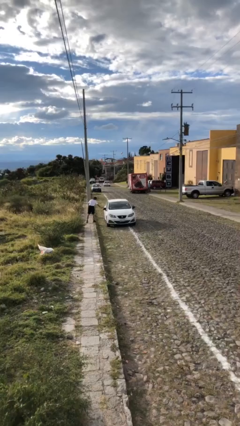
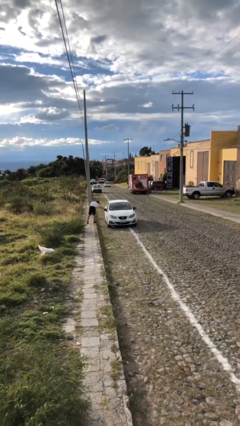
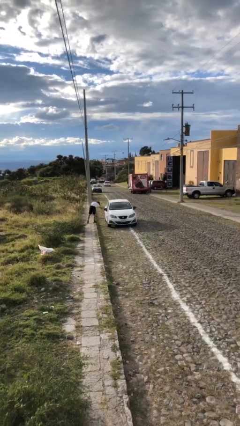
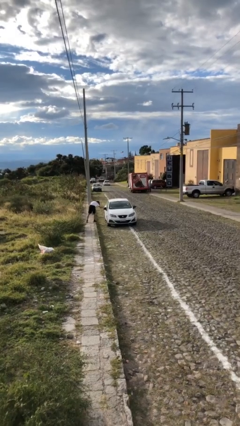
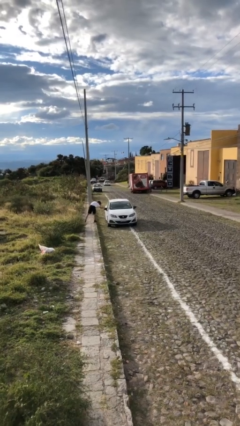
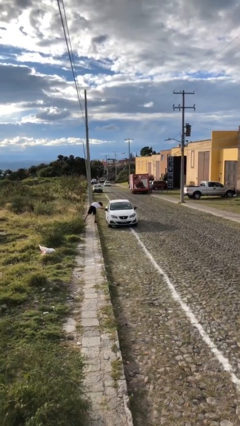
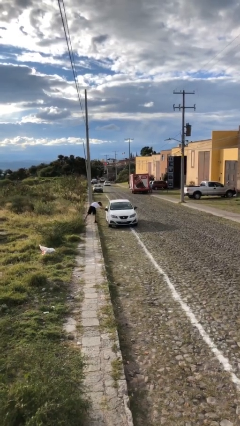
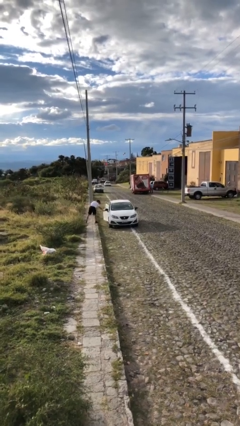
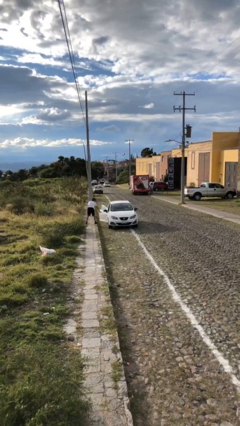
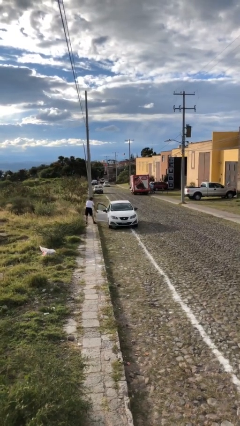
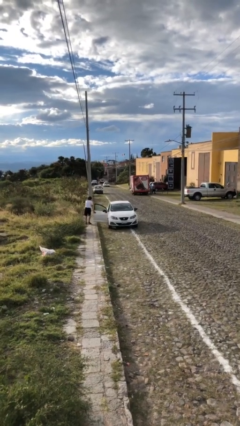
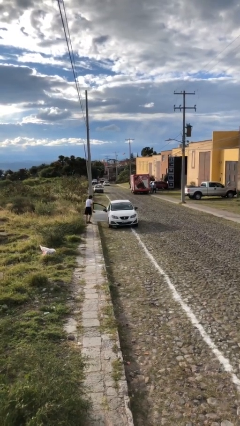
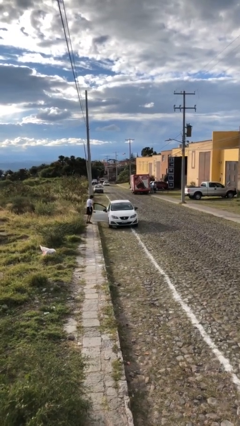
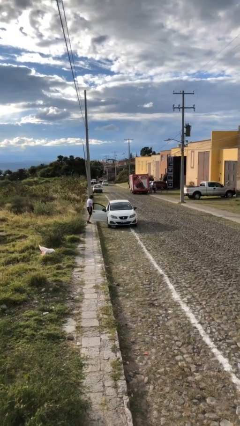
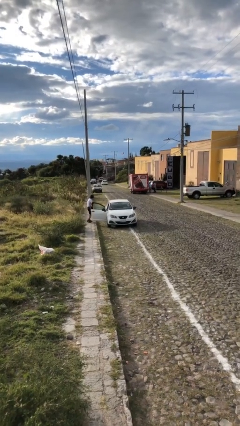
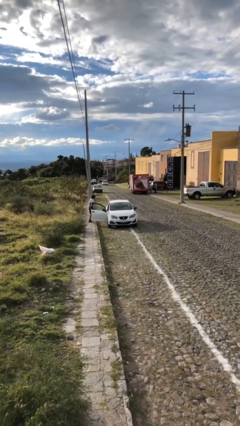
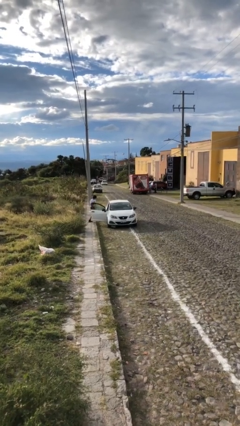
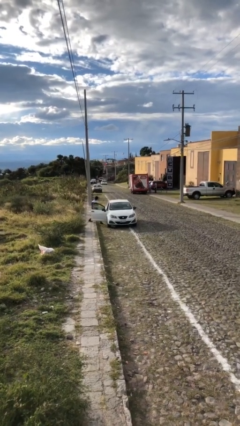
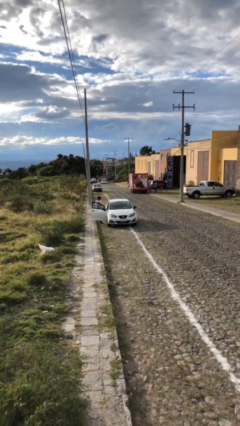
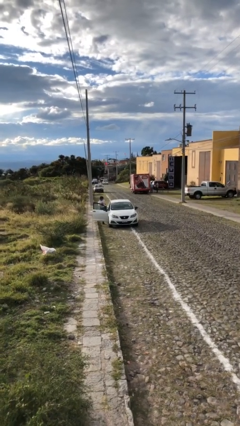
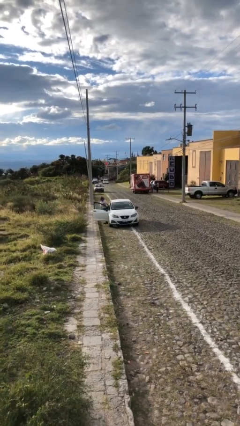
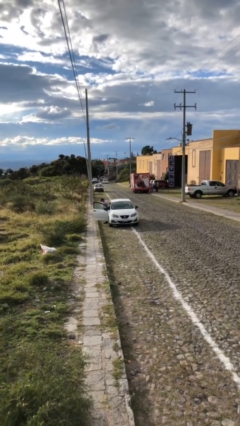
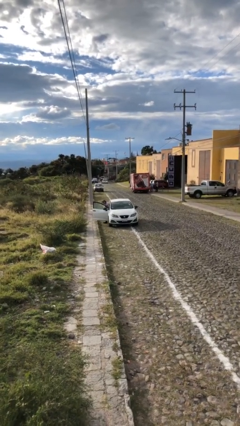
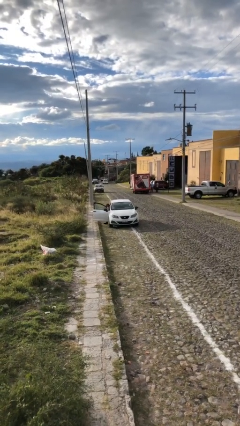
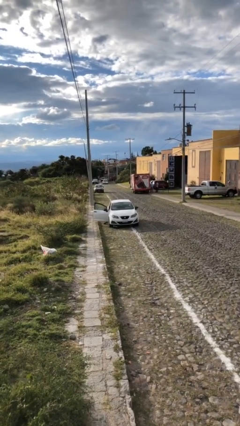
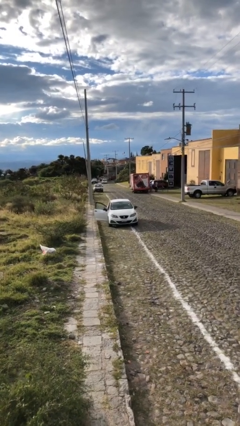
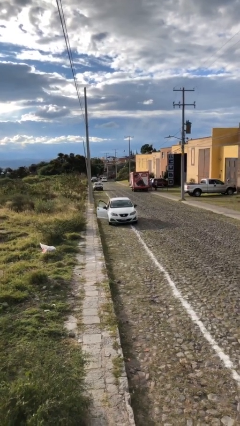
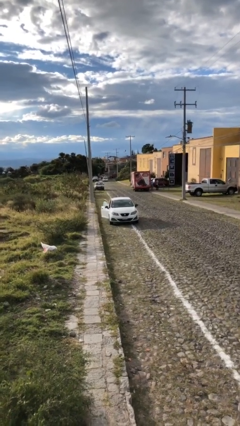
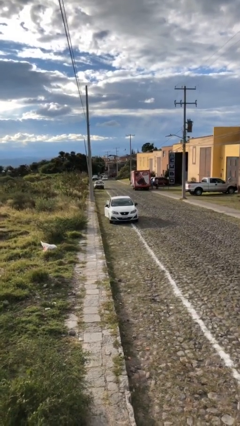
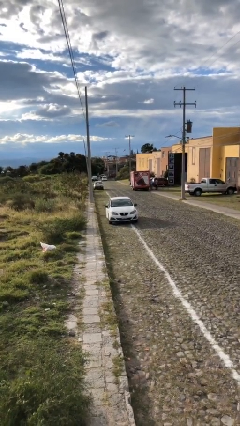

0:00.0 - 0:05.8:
car picks up person

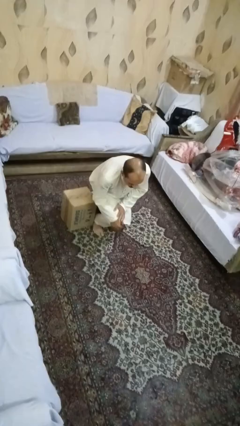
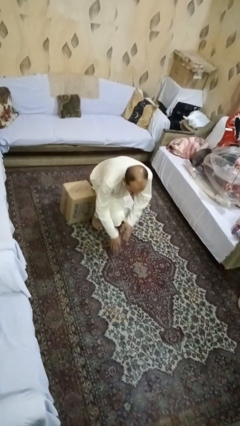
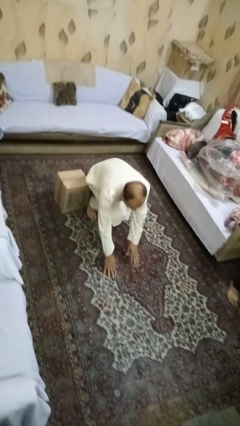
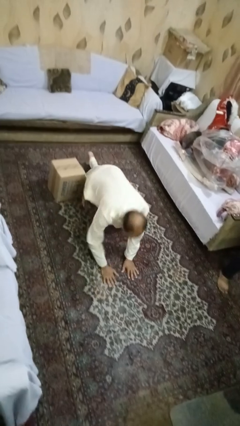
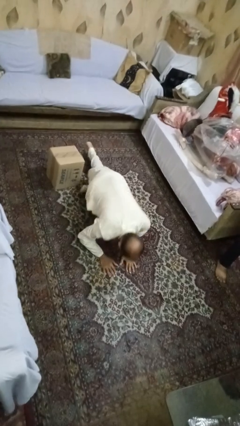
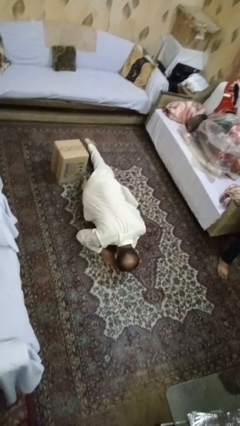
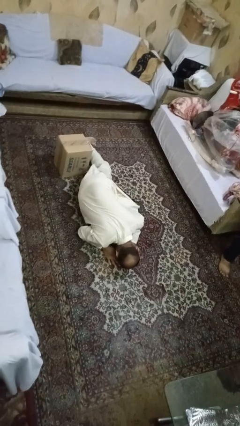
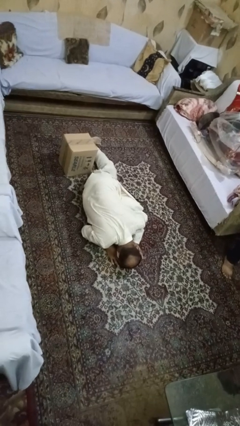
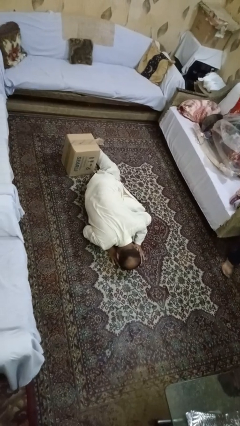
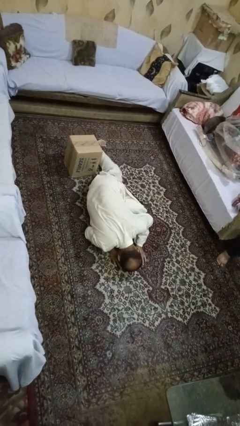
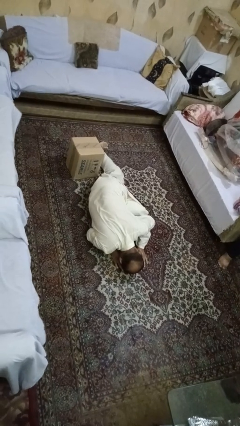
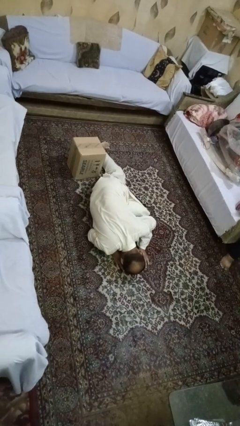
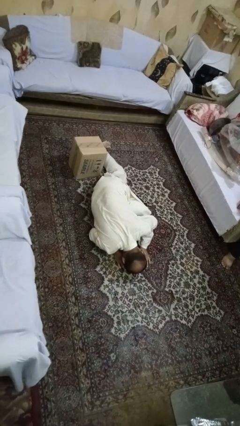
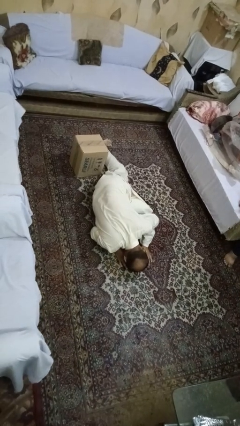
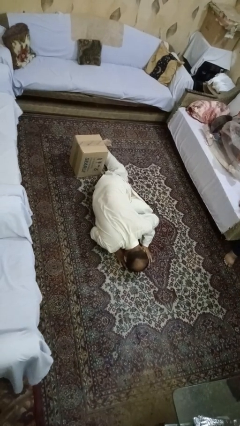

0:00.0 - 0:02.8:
person lies down on floor

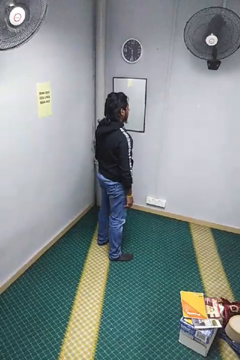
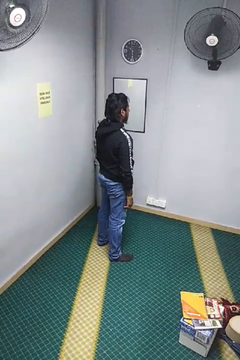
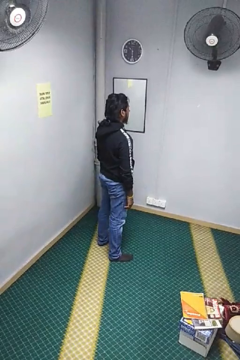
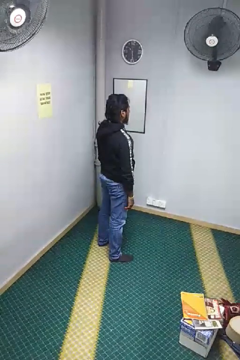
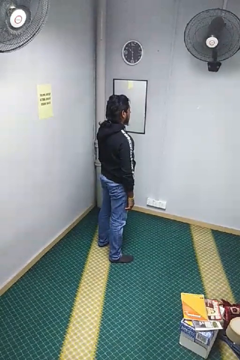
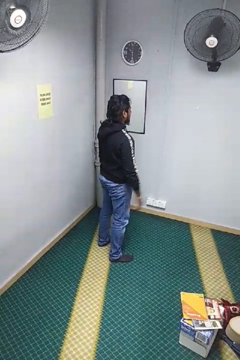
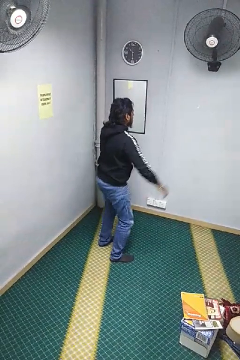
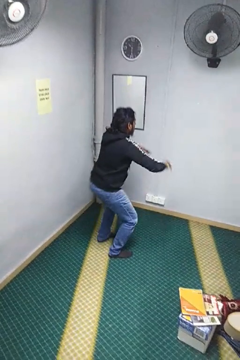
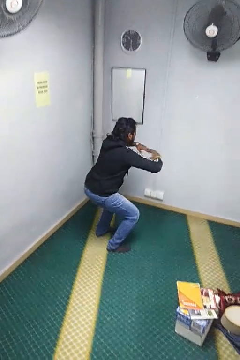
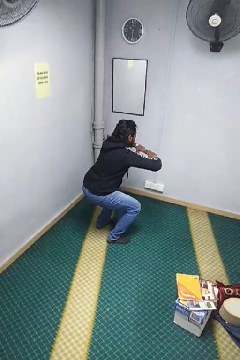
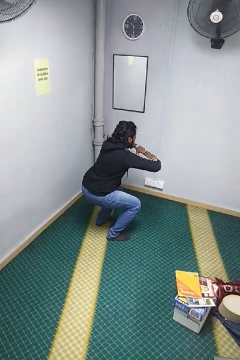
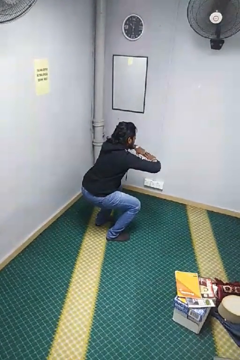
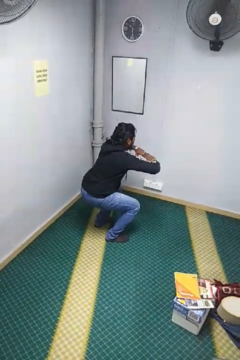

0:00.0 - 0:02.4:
person squats

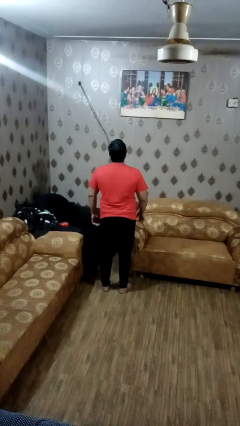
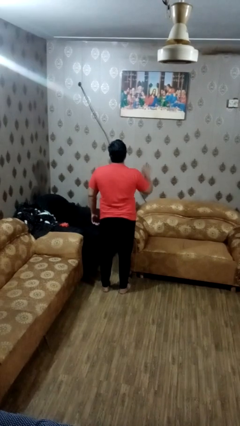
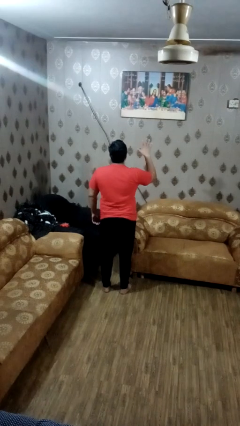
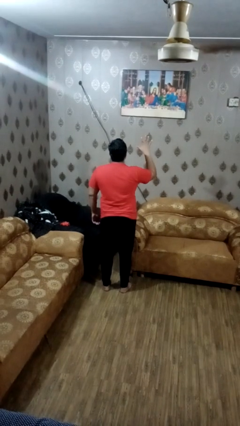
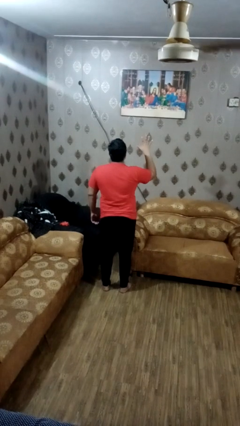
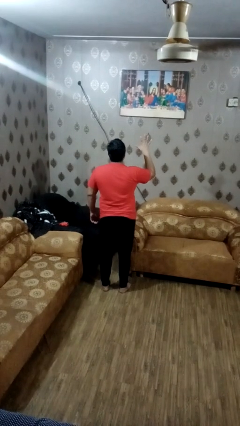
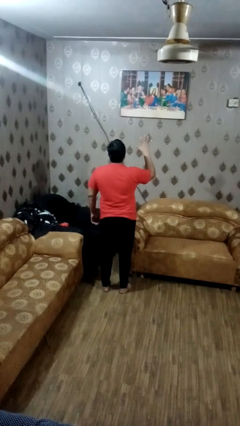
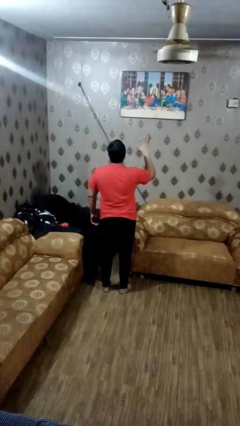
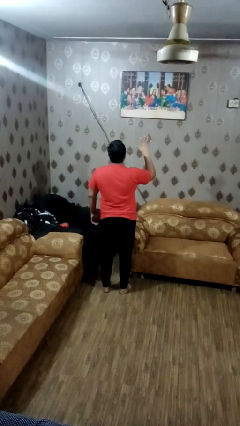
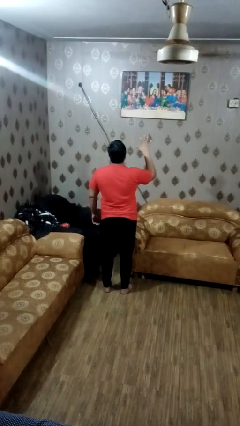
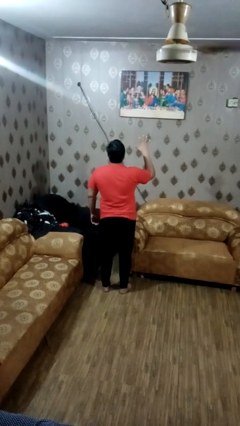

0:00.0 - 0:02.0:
person gestures number five

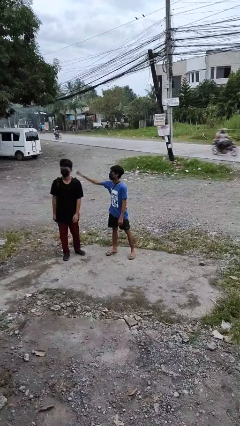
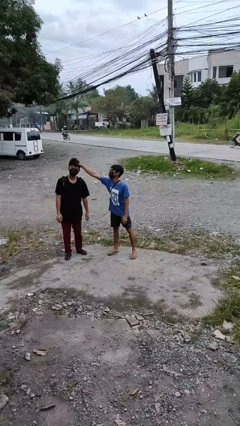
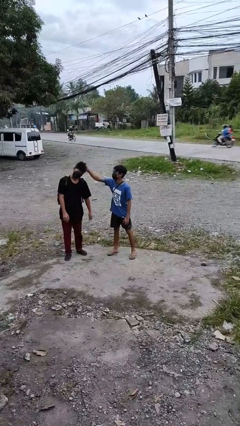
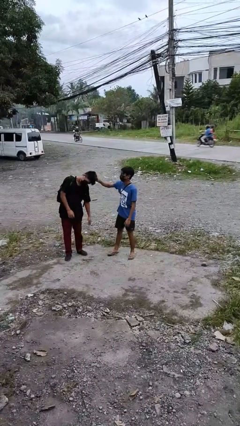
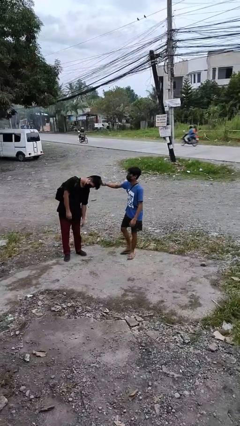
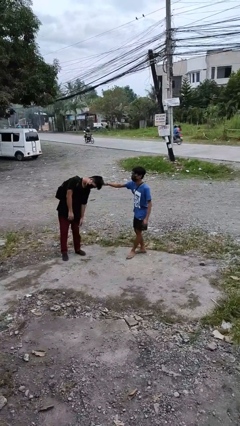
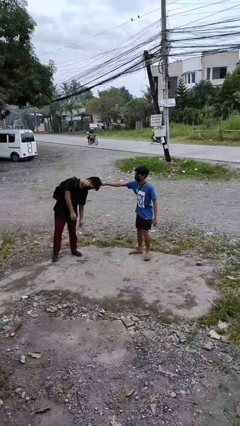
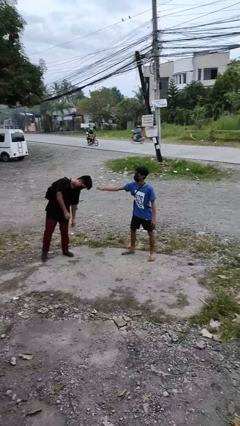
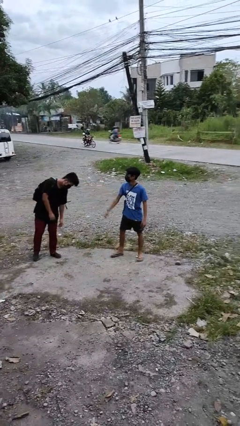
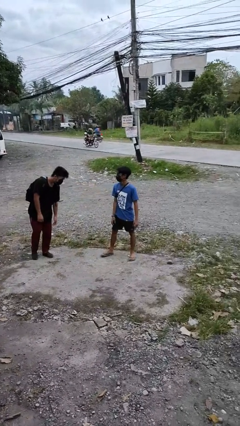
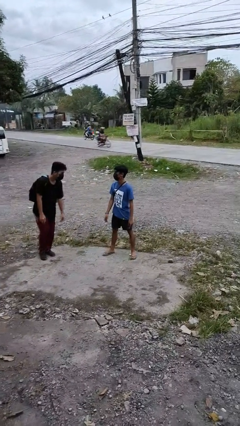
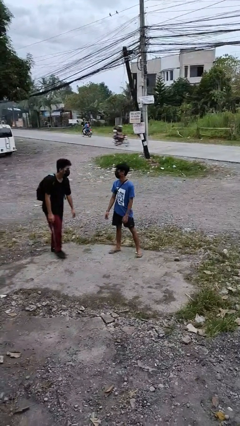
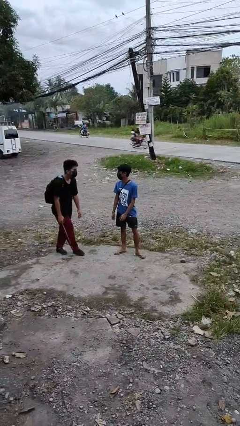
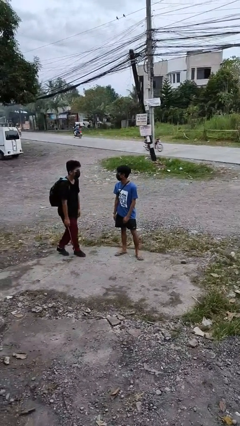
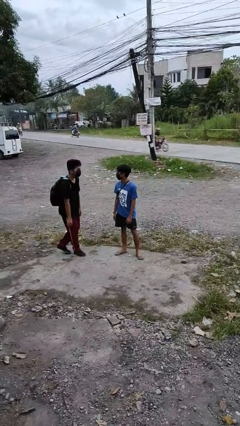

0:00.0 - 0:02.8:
person grabs person by hair

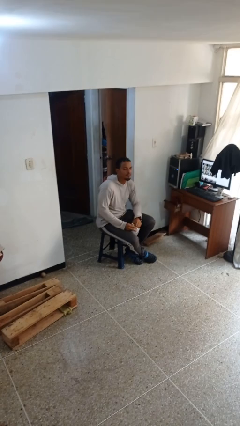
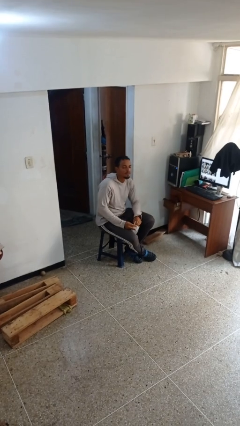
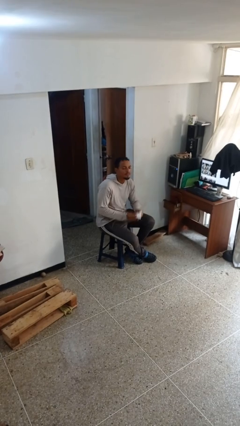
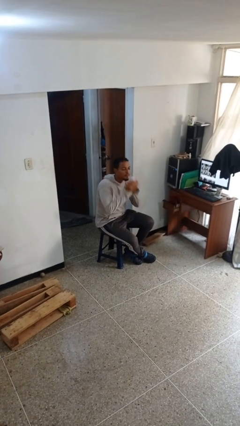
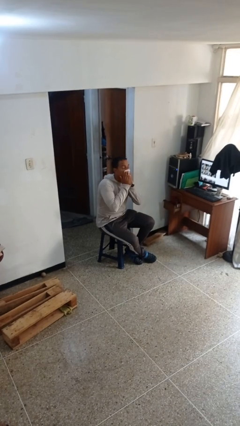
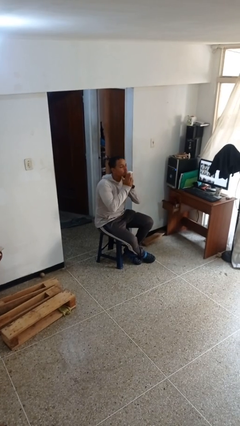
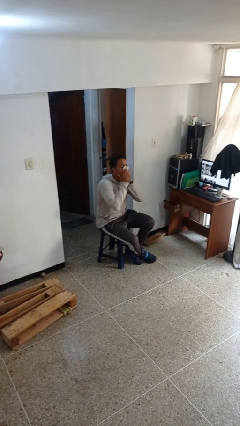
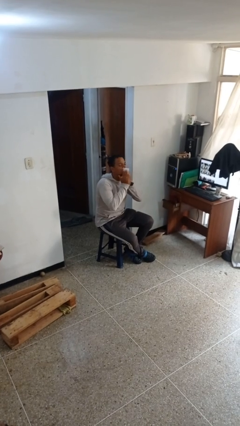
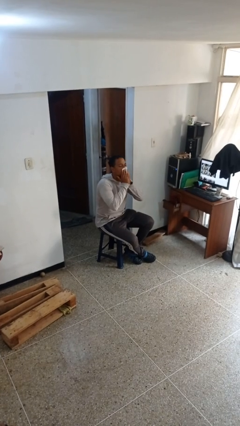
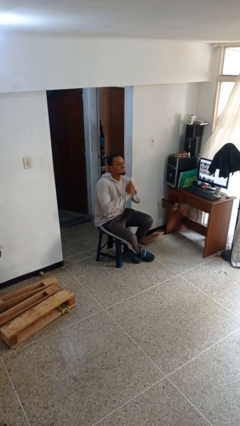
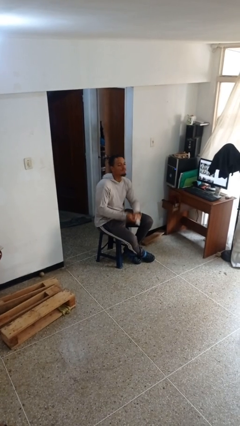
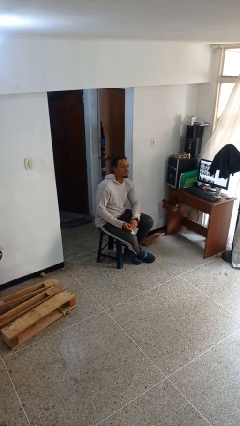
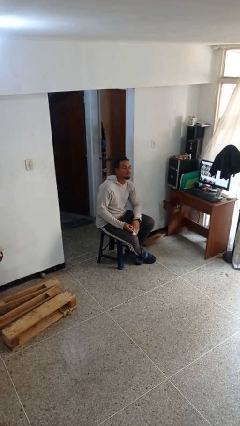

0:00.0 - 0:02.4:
person wipes mouth with napkin
